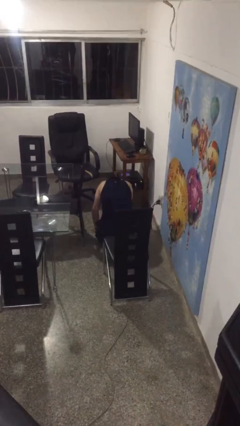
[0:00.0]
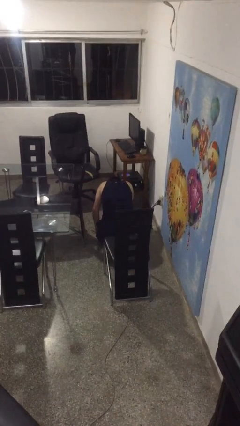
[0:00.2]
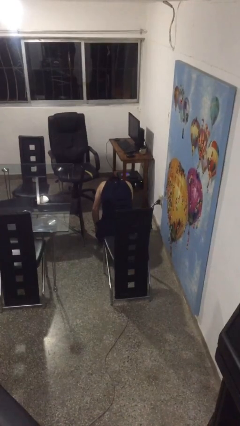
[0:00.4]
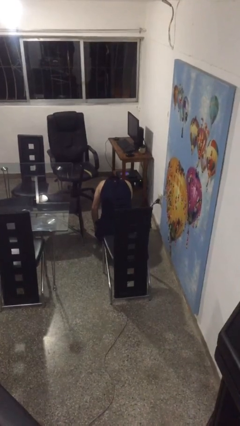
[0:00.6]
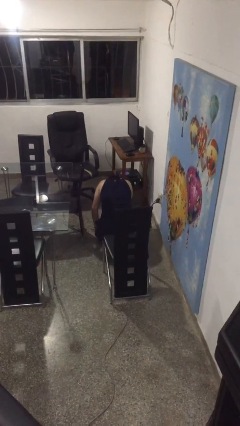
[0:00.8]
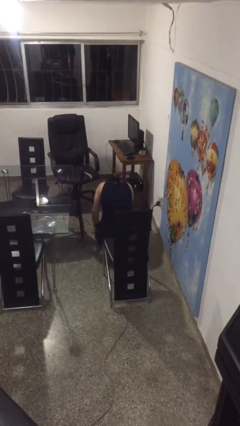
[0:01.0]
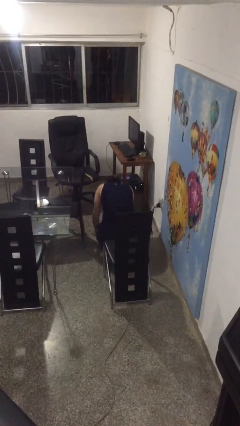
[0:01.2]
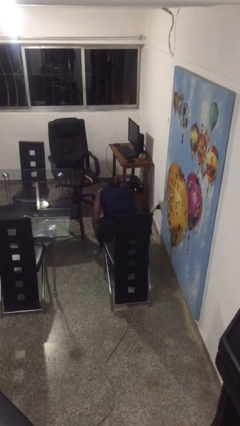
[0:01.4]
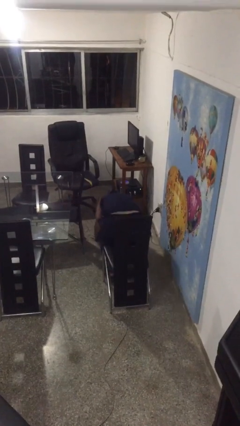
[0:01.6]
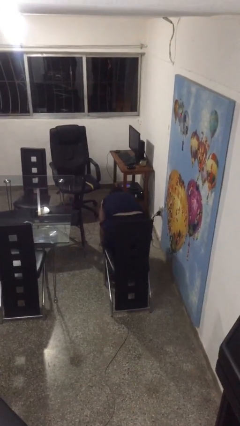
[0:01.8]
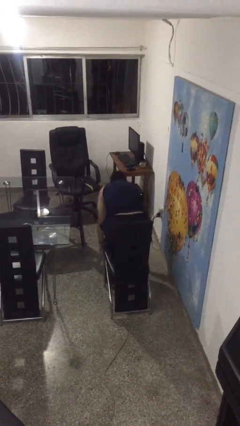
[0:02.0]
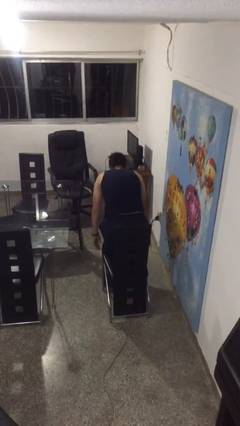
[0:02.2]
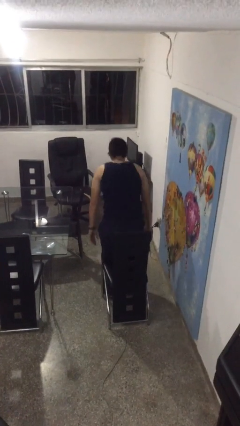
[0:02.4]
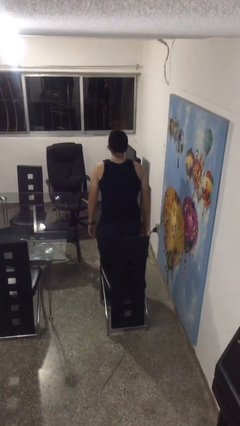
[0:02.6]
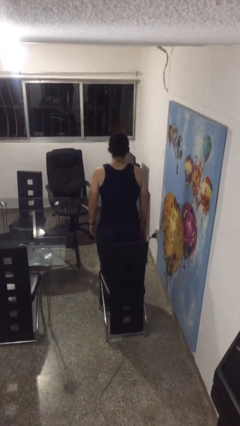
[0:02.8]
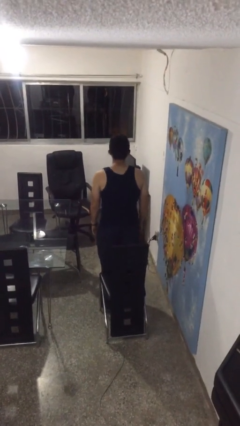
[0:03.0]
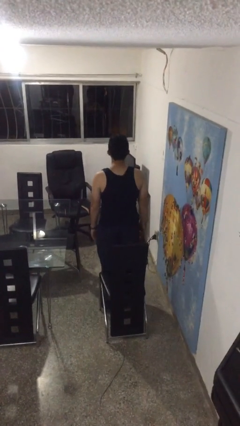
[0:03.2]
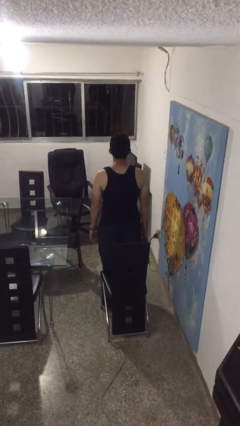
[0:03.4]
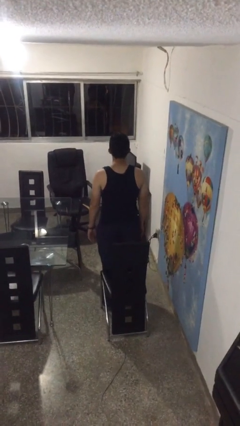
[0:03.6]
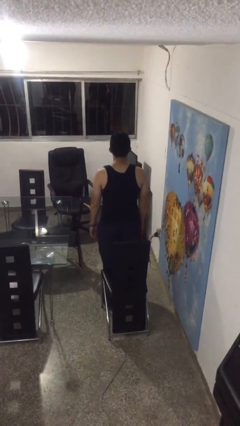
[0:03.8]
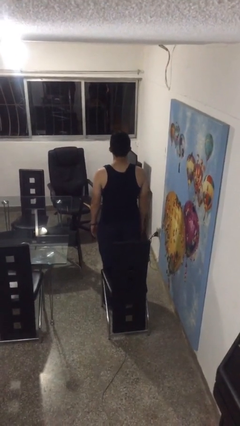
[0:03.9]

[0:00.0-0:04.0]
person stands up from floor

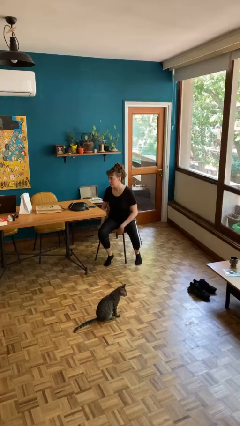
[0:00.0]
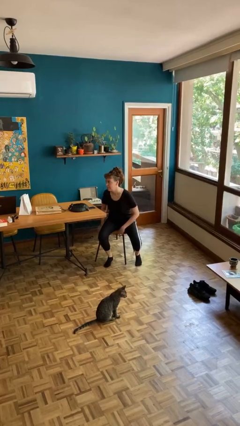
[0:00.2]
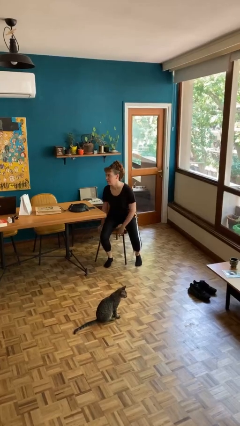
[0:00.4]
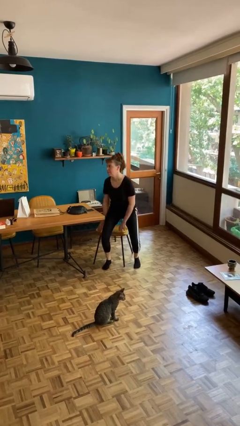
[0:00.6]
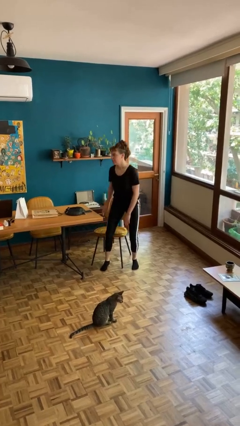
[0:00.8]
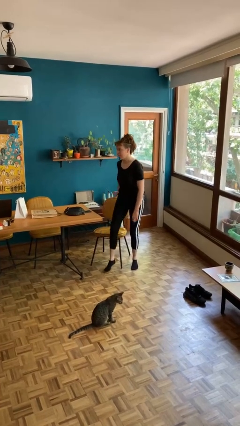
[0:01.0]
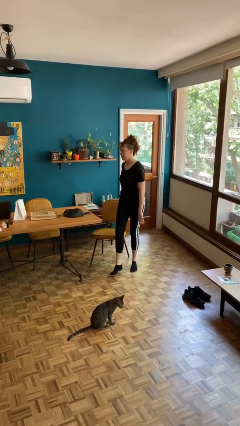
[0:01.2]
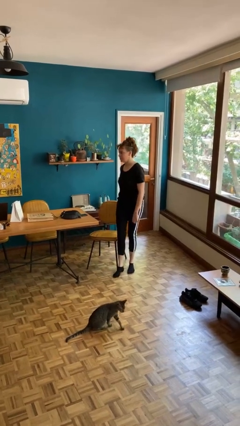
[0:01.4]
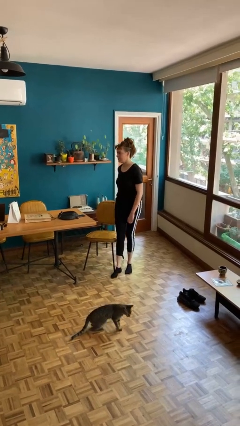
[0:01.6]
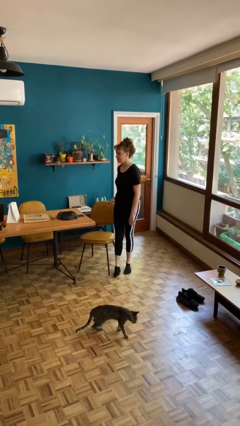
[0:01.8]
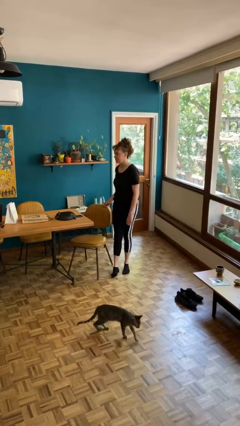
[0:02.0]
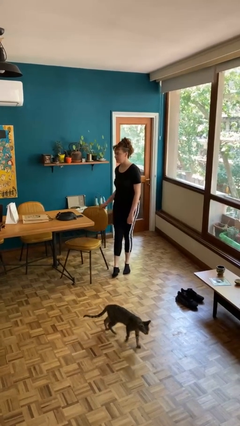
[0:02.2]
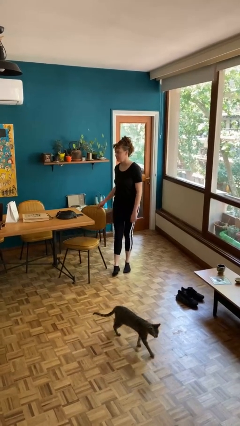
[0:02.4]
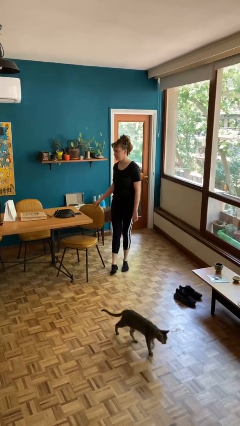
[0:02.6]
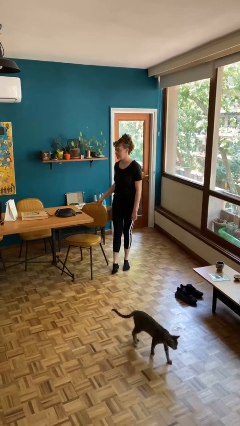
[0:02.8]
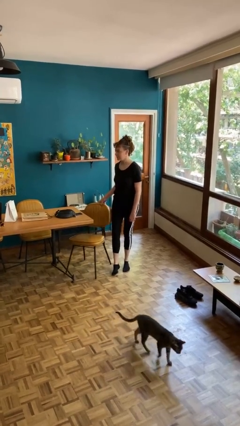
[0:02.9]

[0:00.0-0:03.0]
person stands up

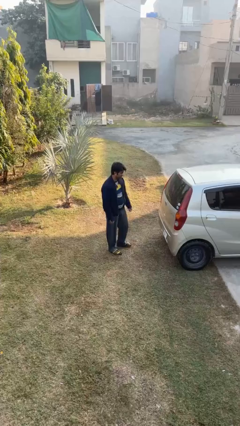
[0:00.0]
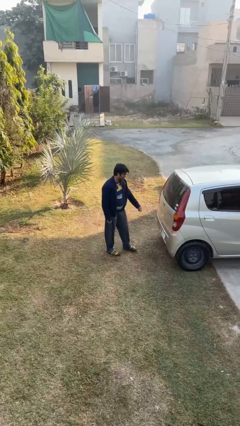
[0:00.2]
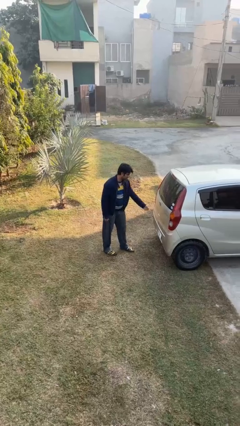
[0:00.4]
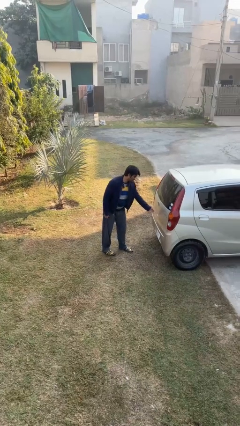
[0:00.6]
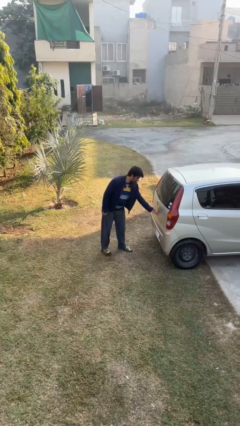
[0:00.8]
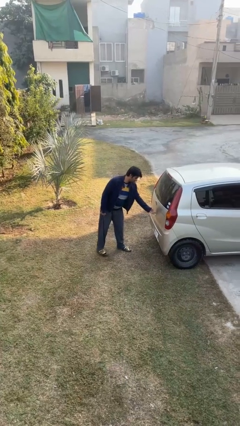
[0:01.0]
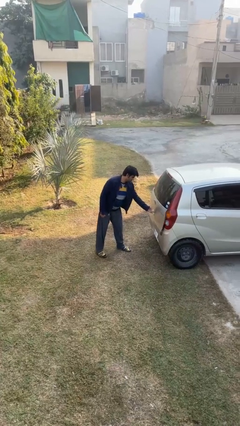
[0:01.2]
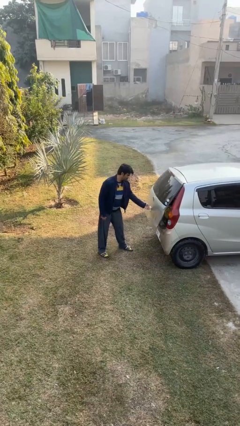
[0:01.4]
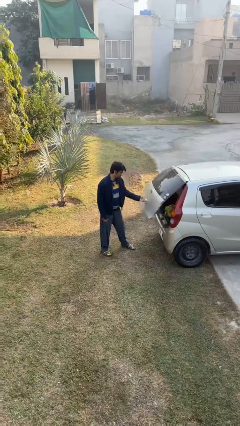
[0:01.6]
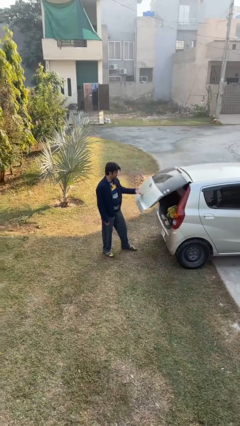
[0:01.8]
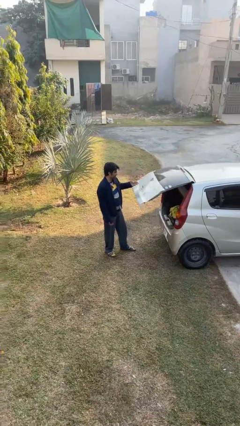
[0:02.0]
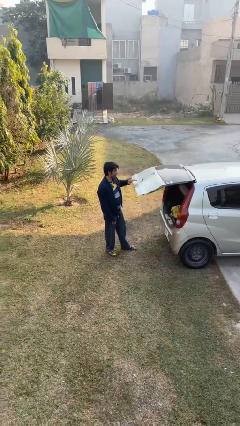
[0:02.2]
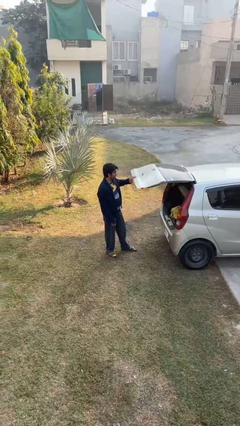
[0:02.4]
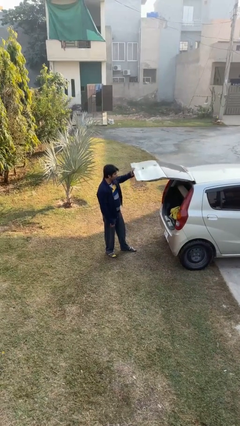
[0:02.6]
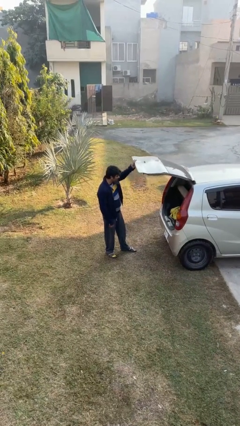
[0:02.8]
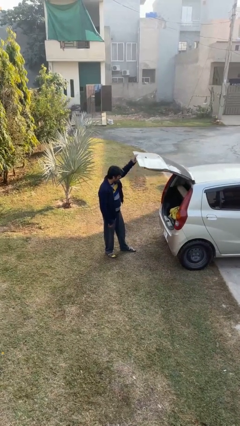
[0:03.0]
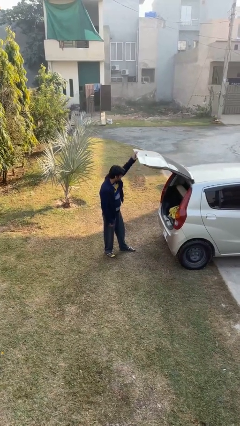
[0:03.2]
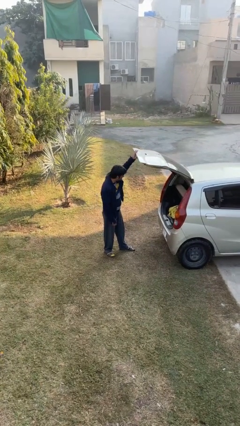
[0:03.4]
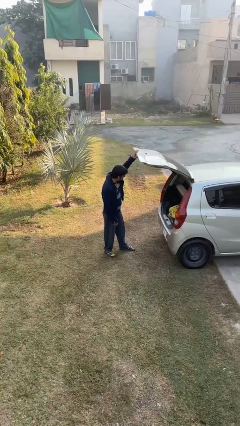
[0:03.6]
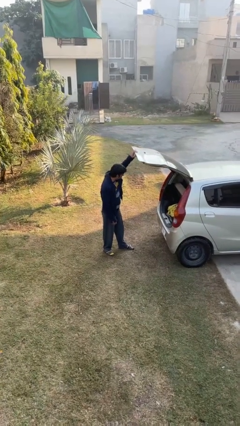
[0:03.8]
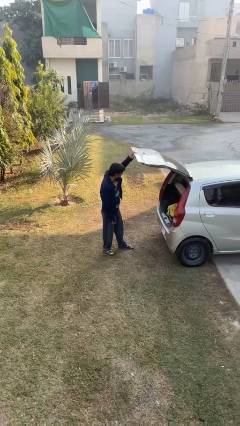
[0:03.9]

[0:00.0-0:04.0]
person opens car trunk

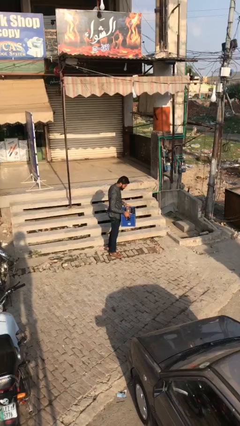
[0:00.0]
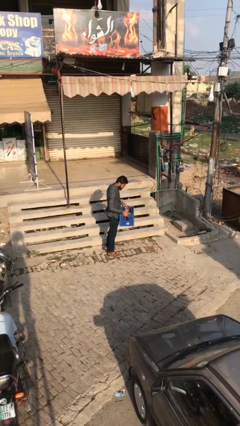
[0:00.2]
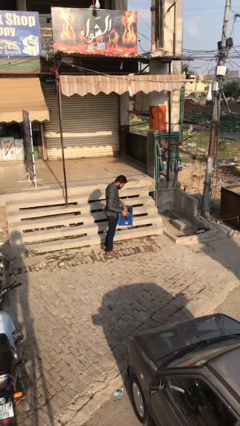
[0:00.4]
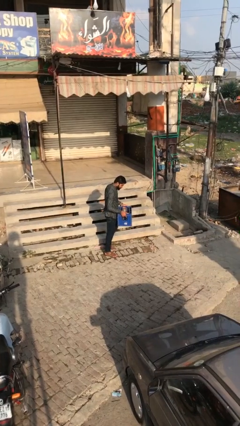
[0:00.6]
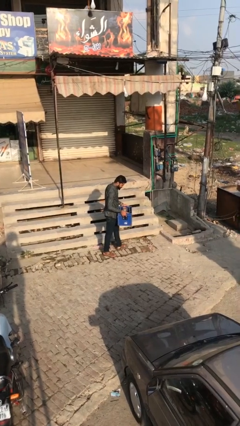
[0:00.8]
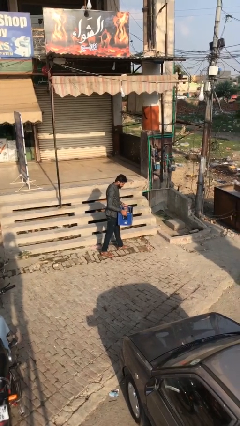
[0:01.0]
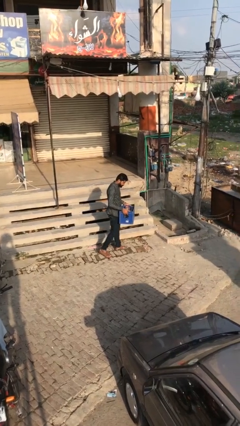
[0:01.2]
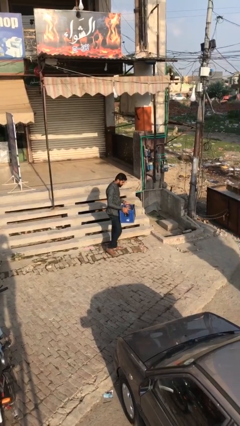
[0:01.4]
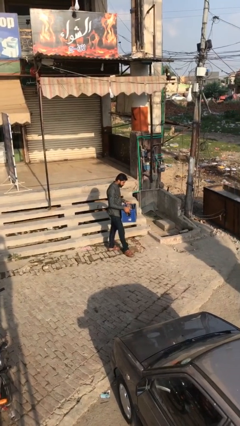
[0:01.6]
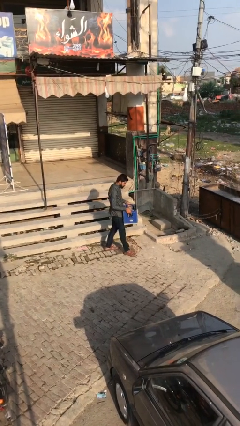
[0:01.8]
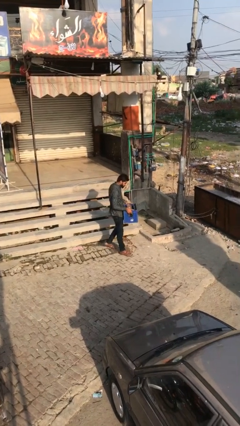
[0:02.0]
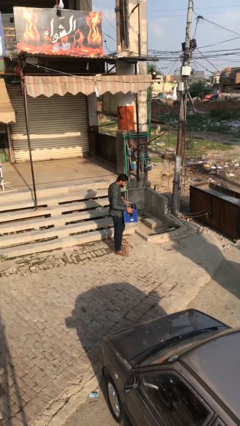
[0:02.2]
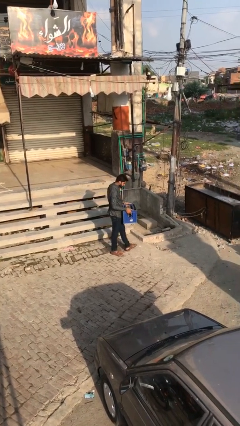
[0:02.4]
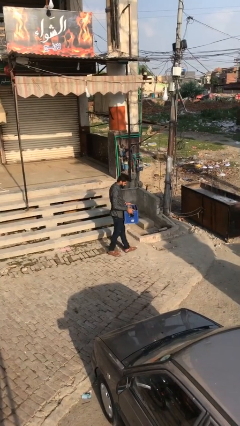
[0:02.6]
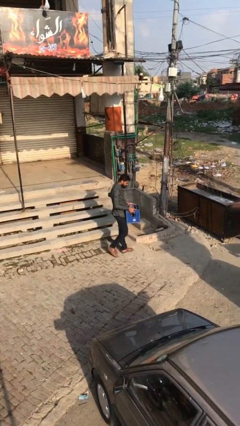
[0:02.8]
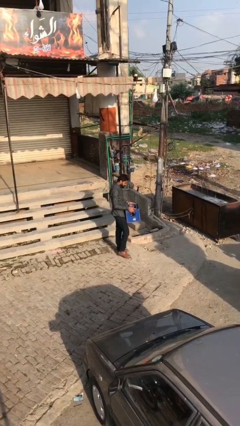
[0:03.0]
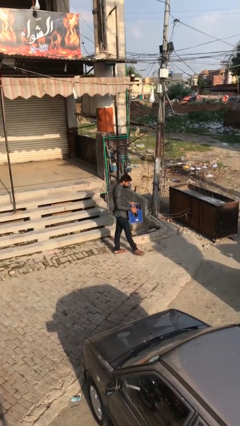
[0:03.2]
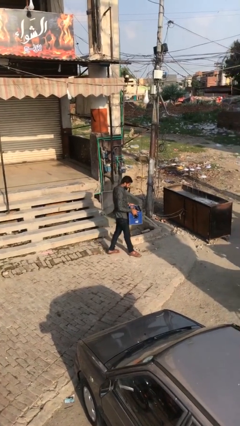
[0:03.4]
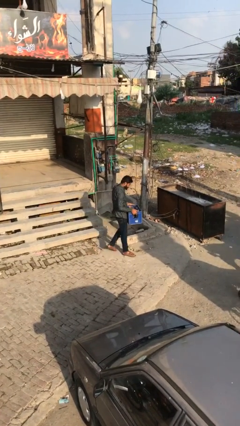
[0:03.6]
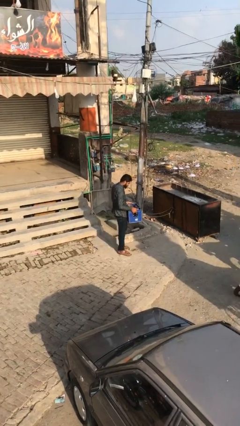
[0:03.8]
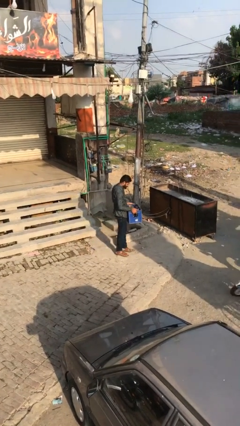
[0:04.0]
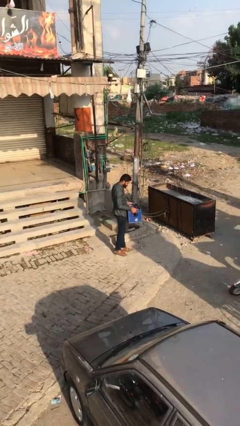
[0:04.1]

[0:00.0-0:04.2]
person carries heavy object

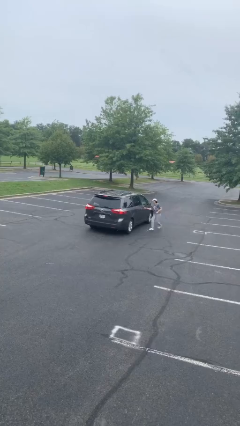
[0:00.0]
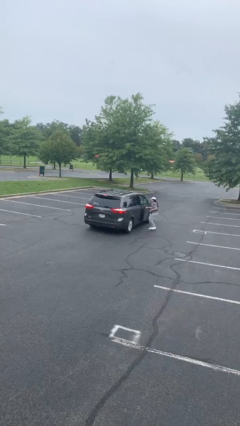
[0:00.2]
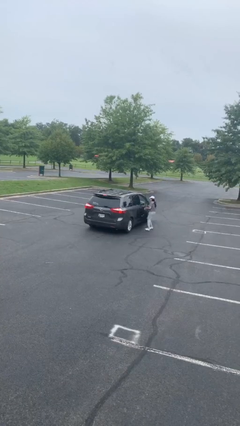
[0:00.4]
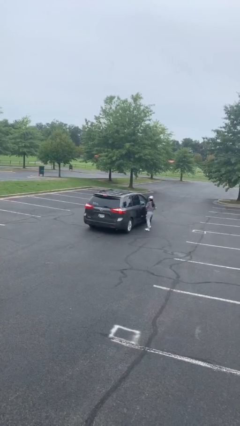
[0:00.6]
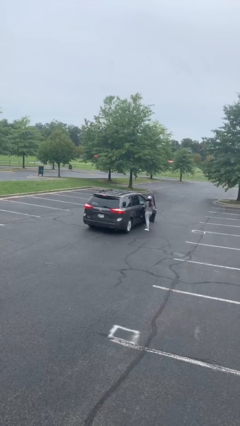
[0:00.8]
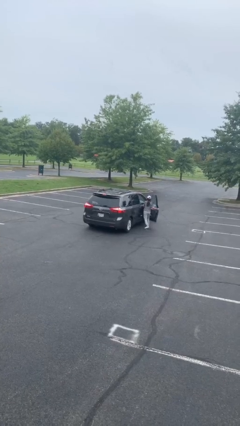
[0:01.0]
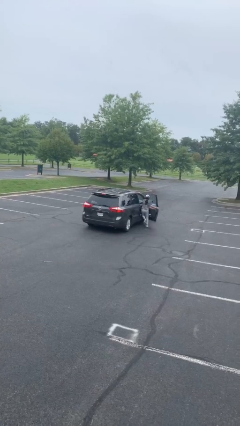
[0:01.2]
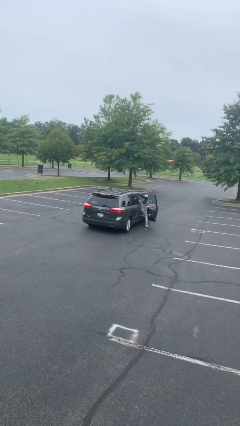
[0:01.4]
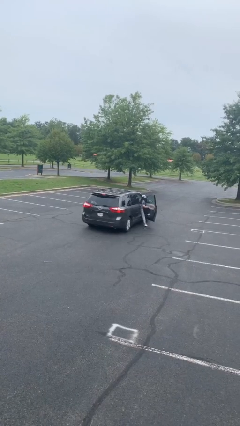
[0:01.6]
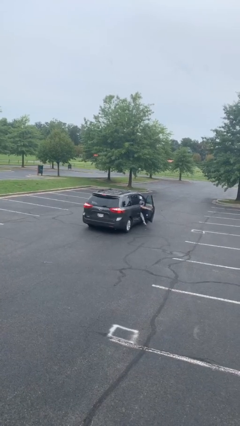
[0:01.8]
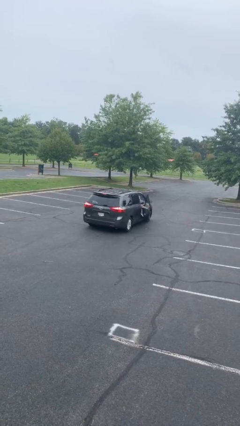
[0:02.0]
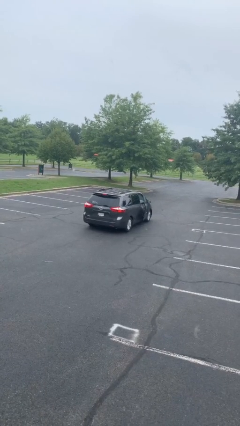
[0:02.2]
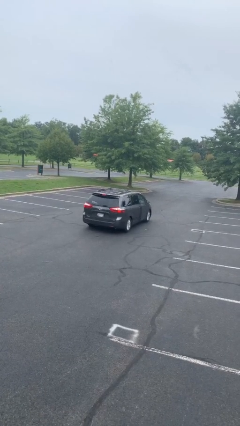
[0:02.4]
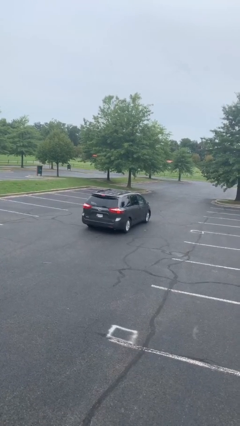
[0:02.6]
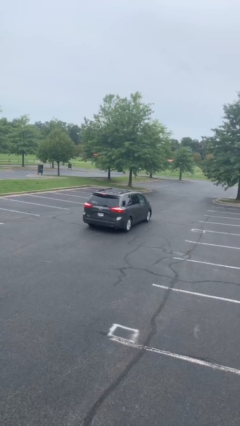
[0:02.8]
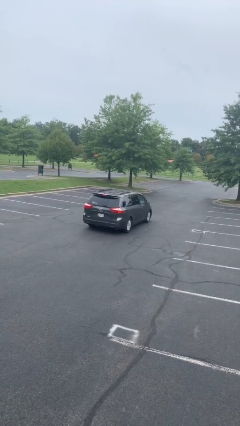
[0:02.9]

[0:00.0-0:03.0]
car picks up person
